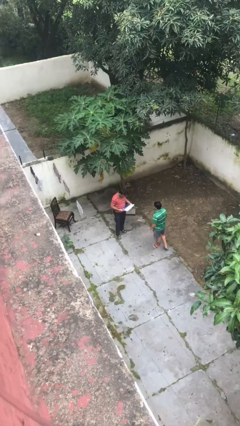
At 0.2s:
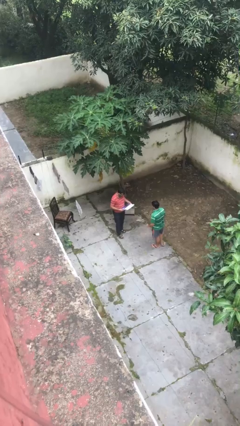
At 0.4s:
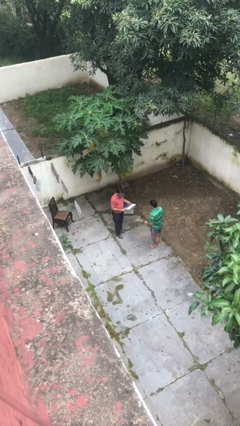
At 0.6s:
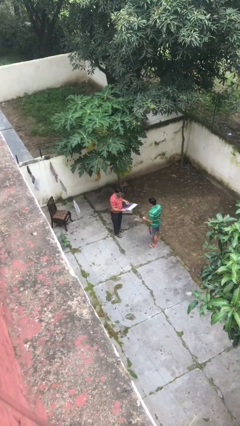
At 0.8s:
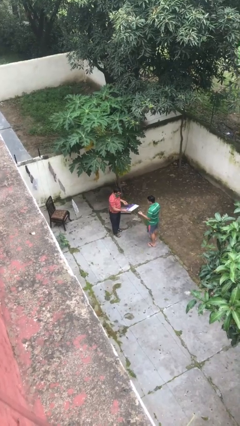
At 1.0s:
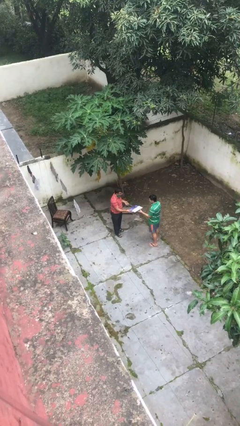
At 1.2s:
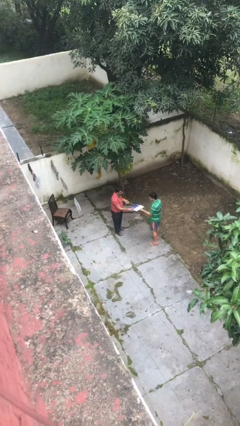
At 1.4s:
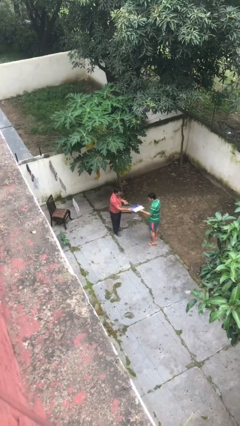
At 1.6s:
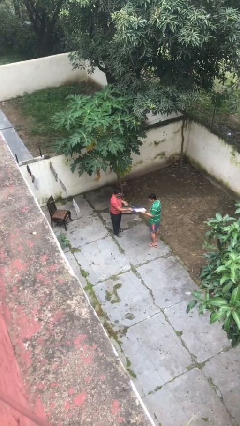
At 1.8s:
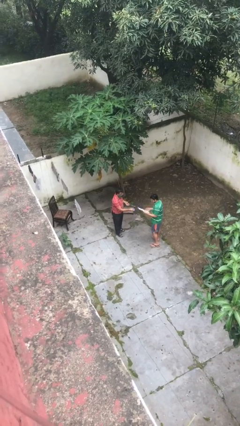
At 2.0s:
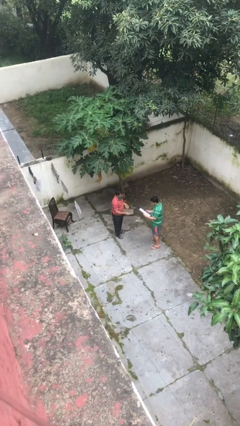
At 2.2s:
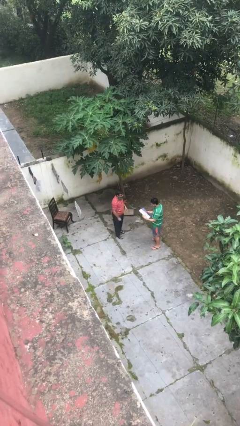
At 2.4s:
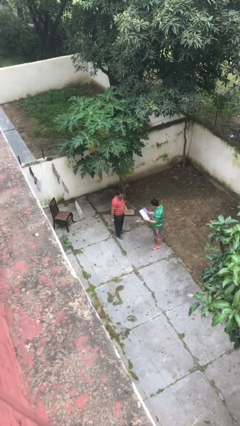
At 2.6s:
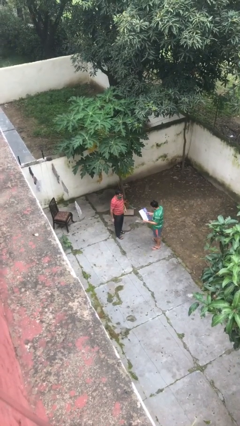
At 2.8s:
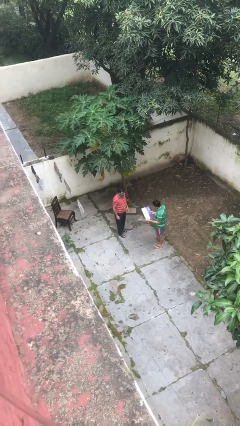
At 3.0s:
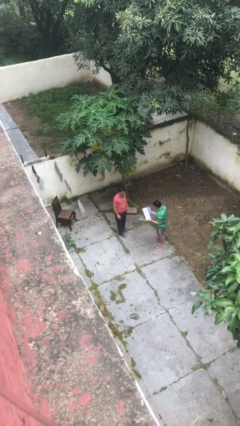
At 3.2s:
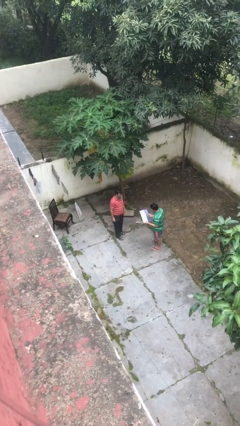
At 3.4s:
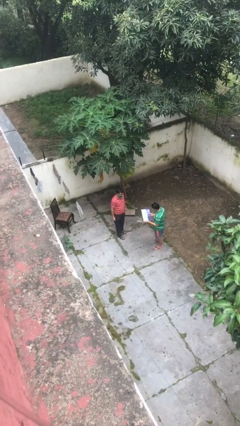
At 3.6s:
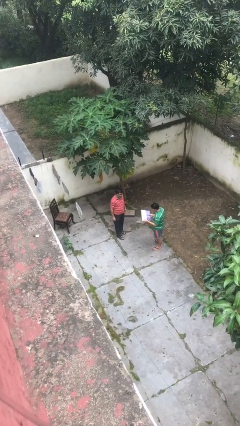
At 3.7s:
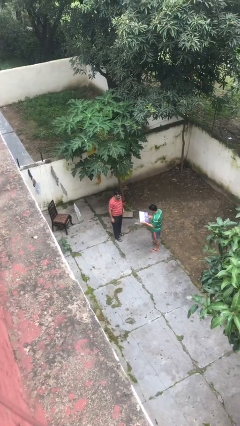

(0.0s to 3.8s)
person transfers object to person

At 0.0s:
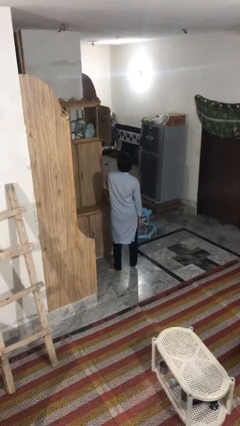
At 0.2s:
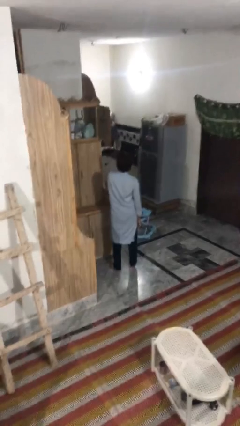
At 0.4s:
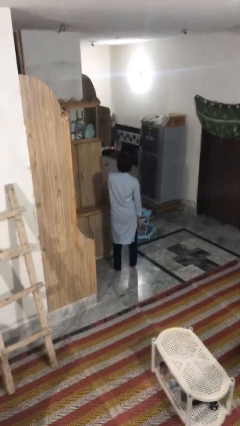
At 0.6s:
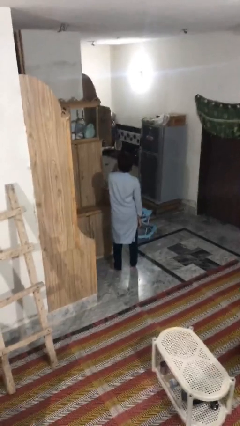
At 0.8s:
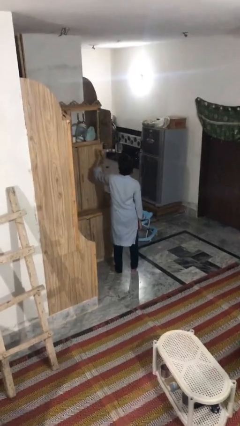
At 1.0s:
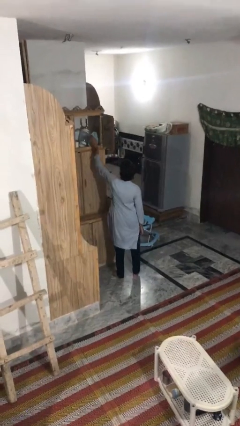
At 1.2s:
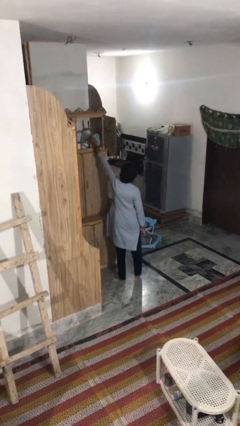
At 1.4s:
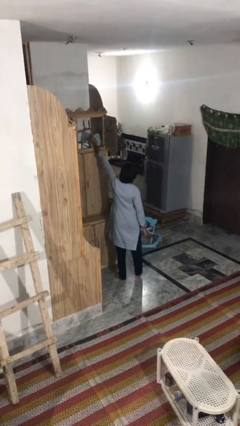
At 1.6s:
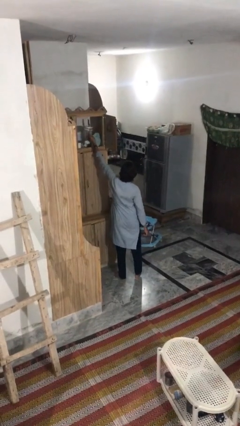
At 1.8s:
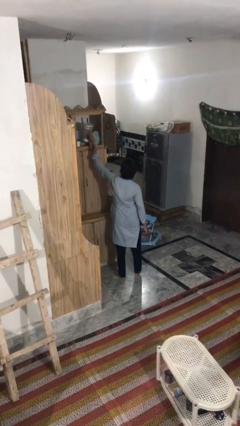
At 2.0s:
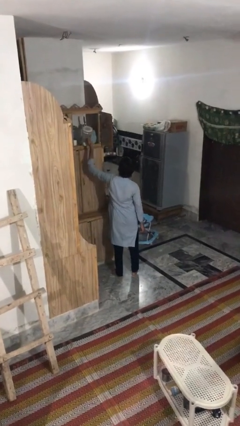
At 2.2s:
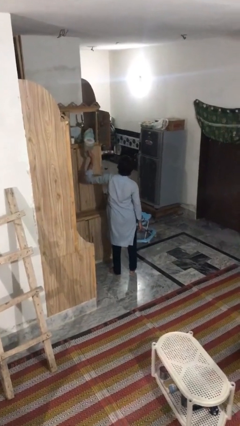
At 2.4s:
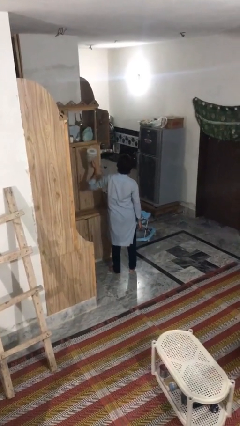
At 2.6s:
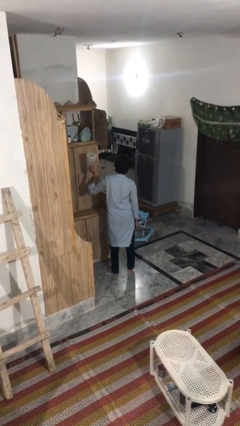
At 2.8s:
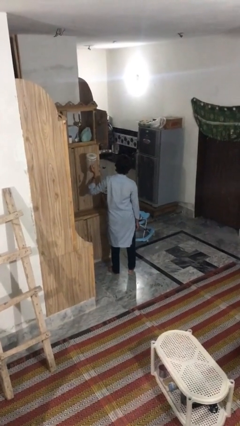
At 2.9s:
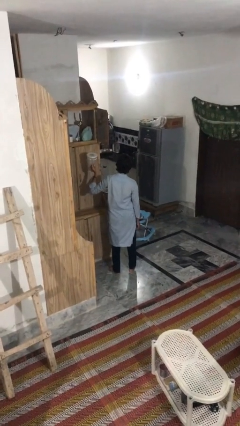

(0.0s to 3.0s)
person picks up object from shelf

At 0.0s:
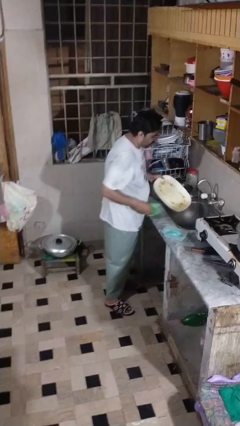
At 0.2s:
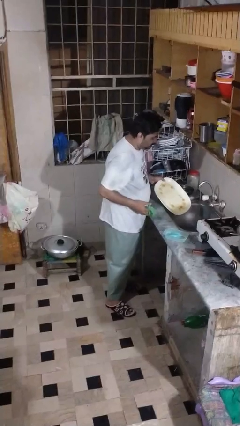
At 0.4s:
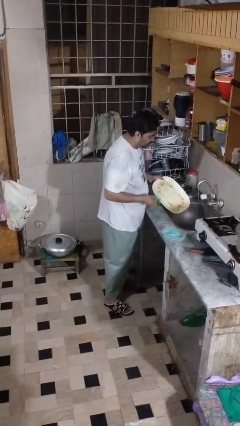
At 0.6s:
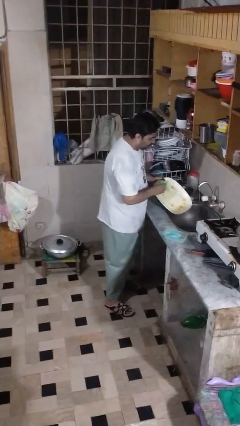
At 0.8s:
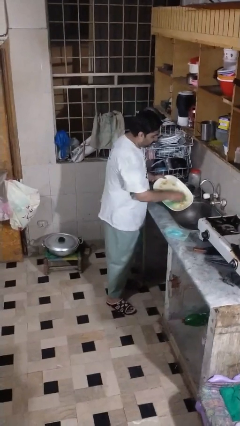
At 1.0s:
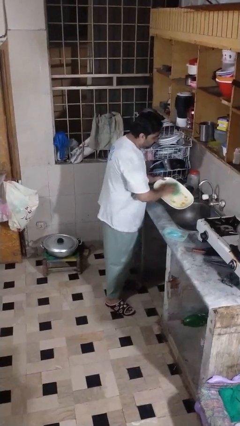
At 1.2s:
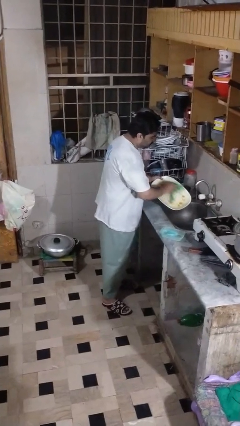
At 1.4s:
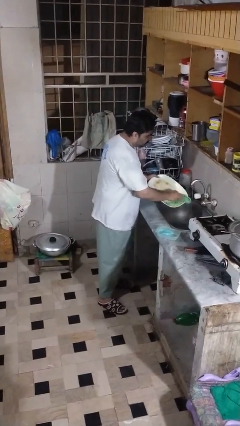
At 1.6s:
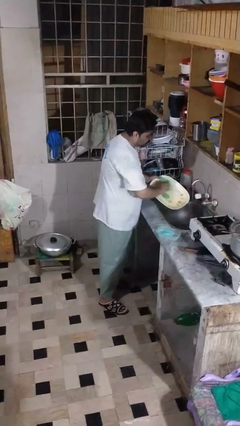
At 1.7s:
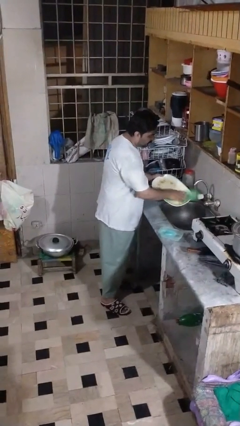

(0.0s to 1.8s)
person washes dish

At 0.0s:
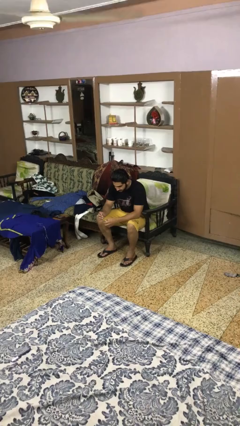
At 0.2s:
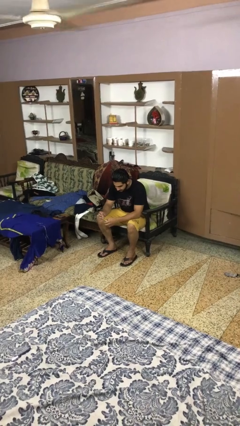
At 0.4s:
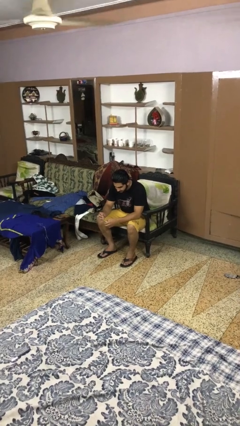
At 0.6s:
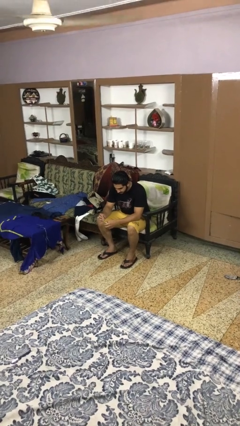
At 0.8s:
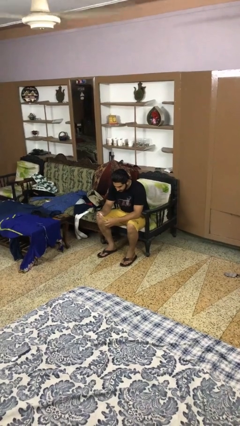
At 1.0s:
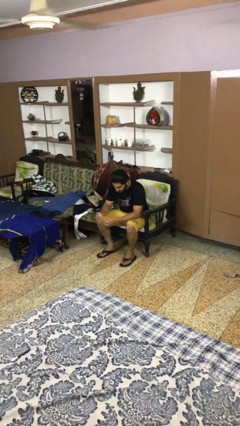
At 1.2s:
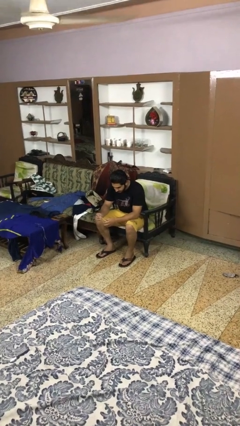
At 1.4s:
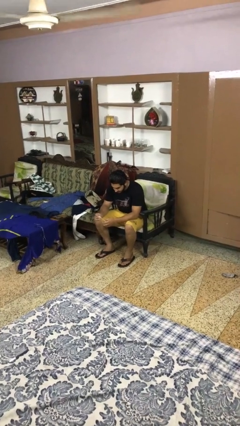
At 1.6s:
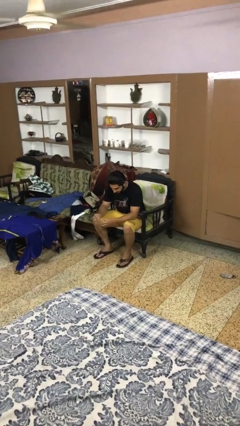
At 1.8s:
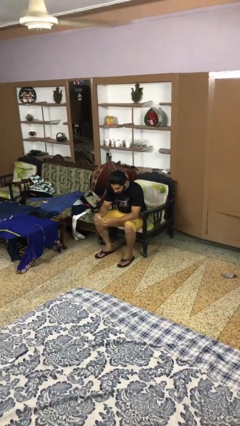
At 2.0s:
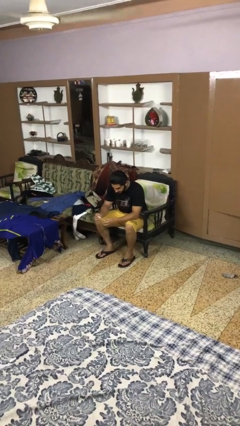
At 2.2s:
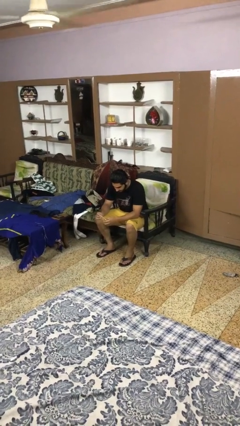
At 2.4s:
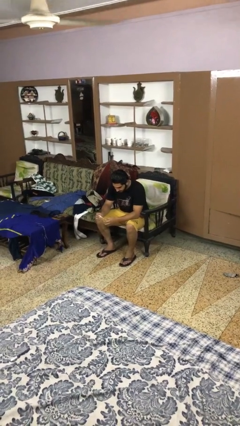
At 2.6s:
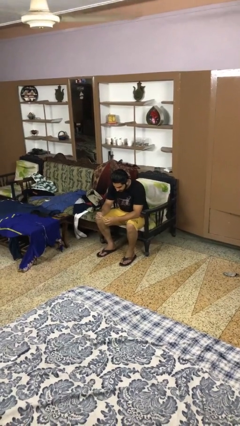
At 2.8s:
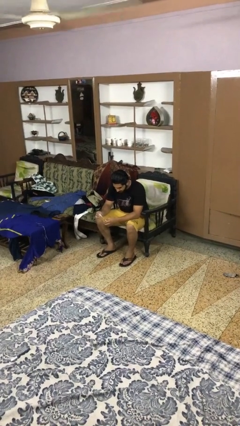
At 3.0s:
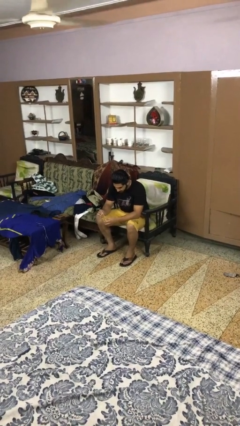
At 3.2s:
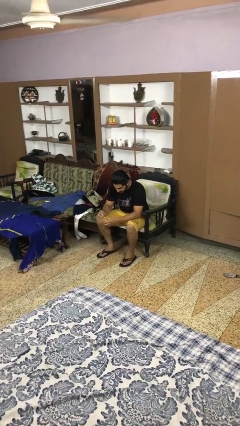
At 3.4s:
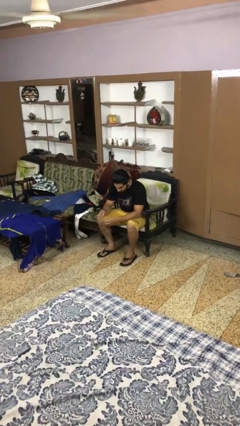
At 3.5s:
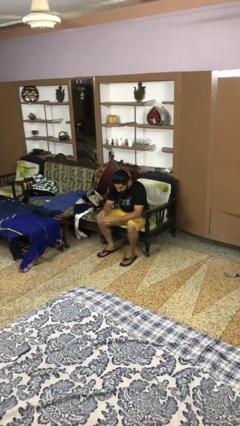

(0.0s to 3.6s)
person paints fingernails

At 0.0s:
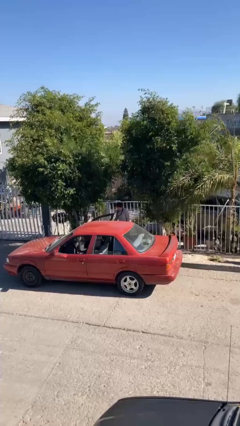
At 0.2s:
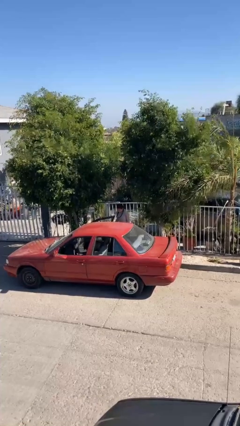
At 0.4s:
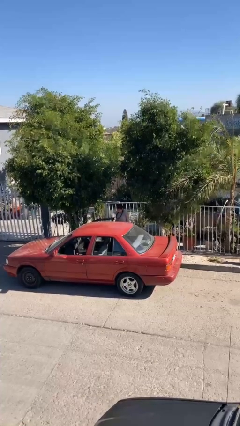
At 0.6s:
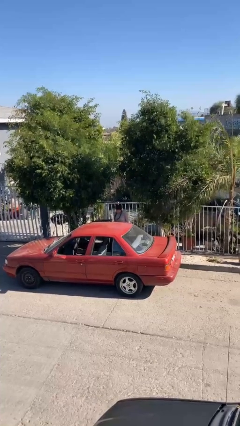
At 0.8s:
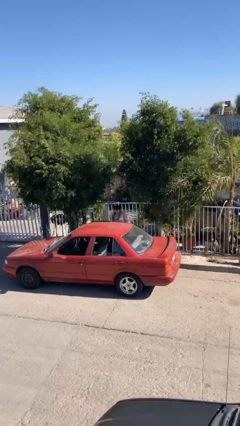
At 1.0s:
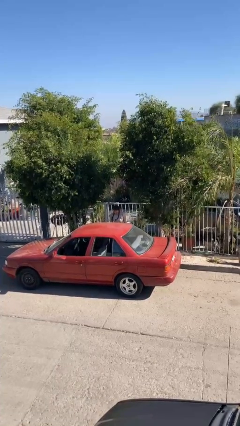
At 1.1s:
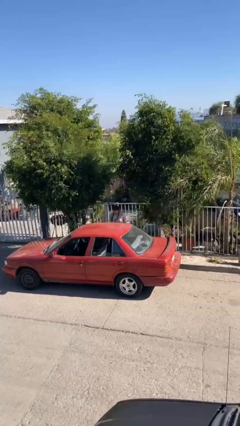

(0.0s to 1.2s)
person closes car door

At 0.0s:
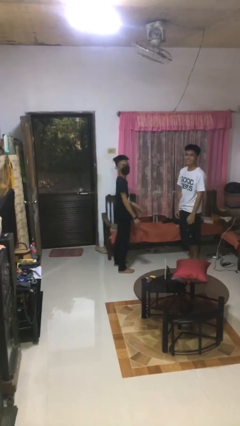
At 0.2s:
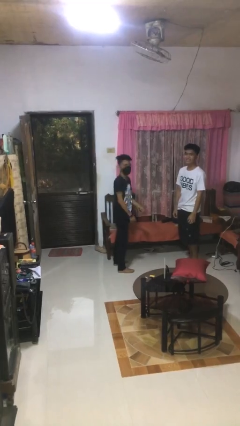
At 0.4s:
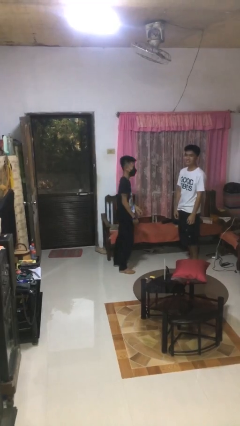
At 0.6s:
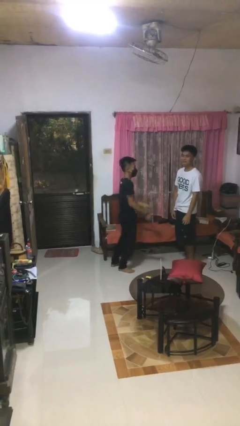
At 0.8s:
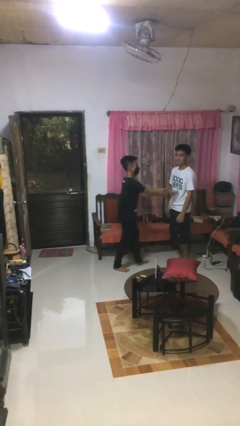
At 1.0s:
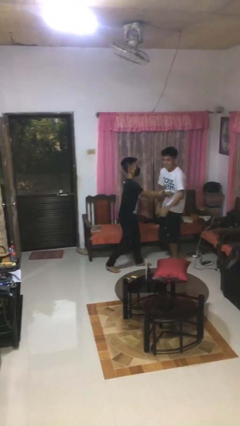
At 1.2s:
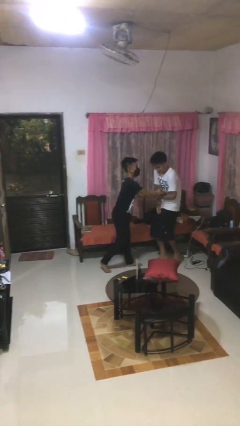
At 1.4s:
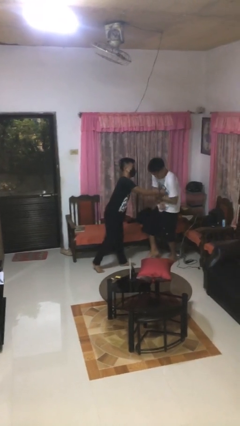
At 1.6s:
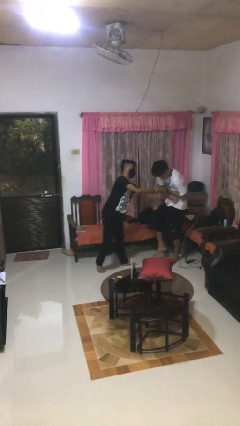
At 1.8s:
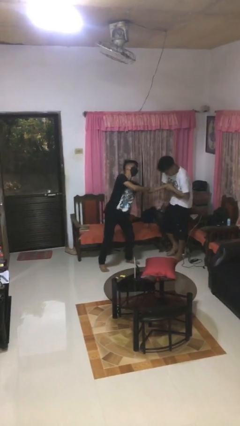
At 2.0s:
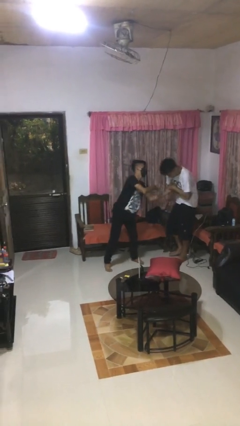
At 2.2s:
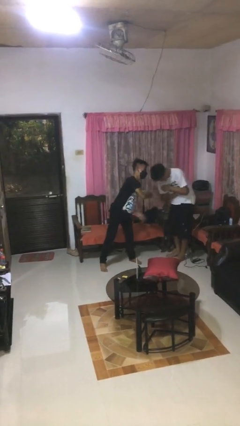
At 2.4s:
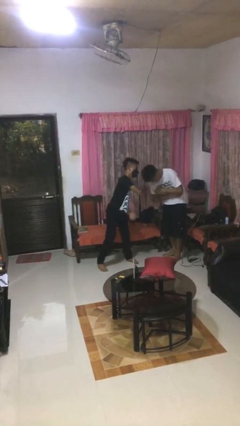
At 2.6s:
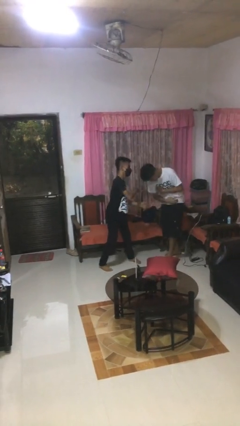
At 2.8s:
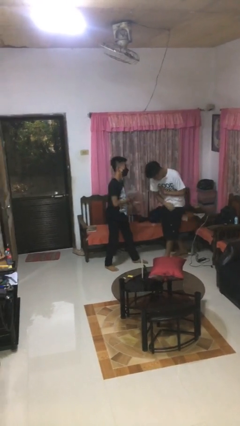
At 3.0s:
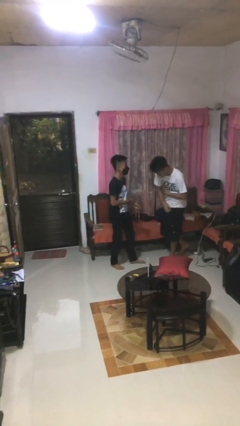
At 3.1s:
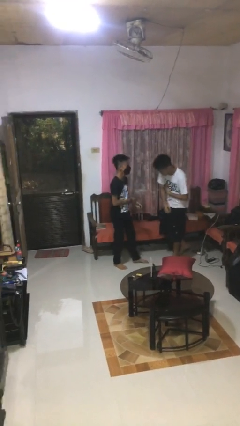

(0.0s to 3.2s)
person tickles person

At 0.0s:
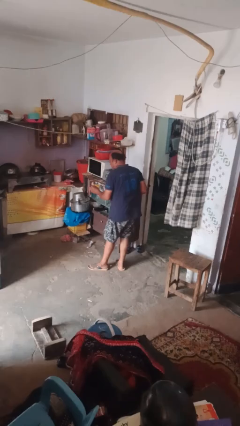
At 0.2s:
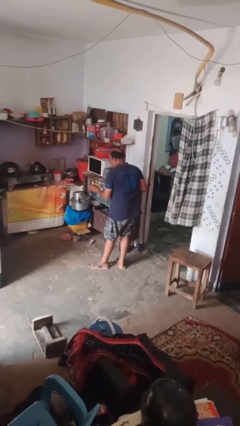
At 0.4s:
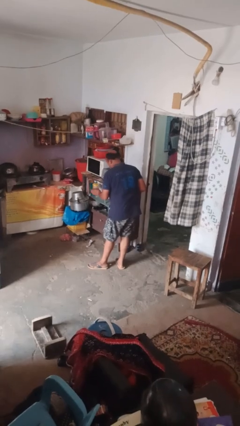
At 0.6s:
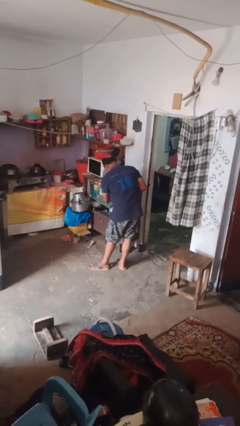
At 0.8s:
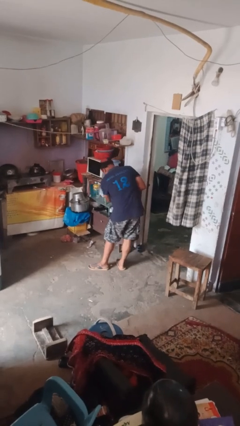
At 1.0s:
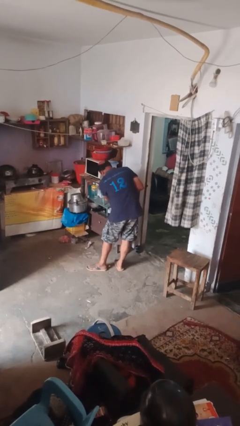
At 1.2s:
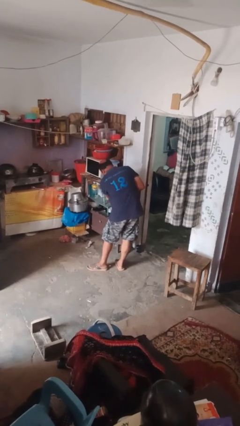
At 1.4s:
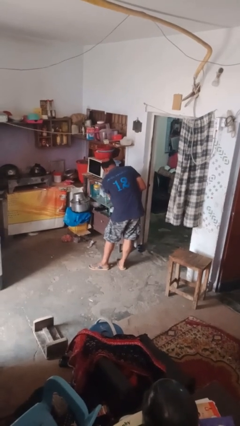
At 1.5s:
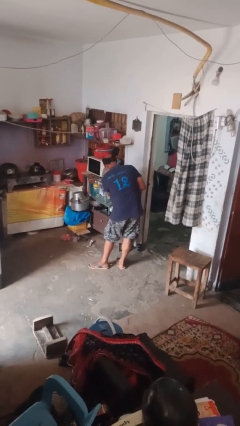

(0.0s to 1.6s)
person puts object into kitchen drawer
